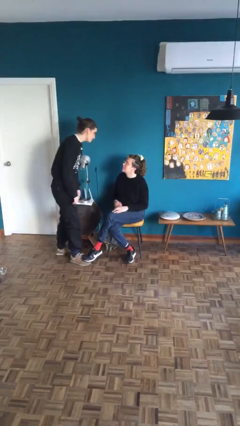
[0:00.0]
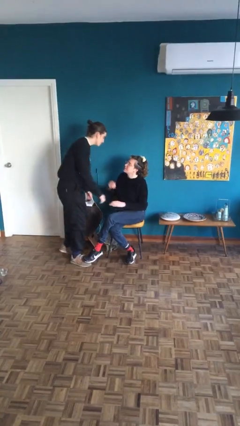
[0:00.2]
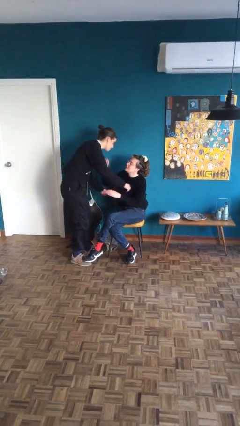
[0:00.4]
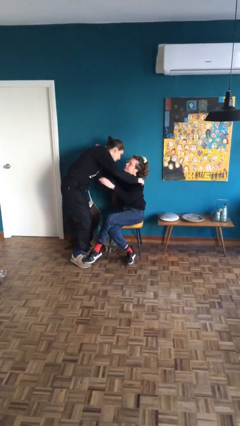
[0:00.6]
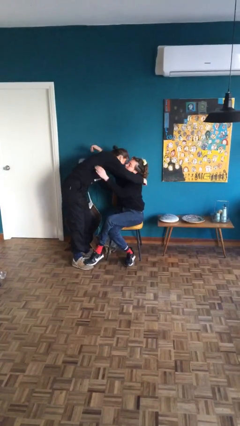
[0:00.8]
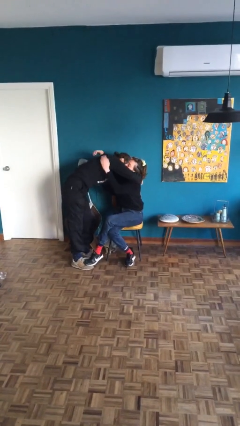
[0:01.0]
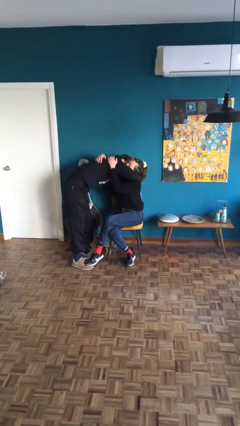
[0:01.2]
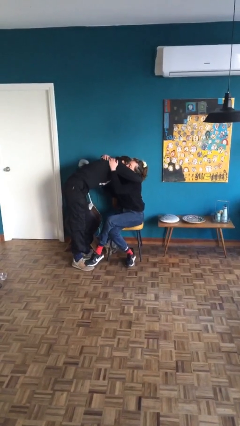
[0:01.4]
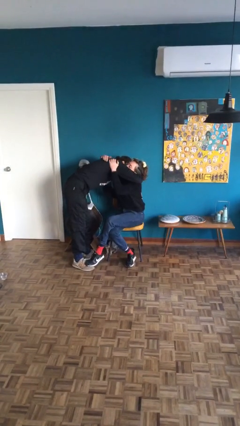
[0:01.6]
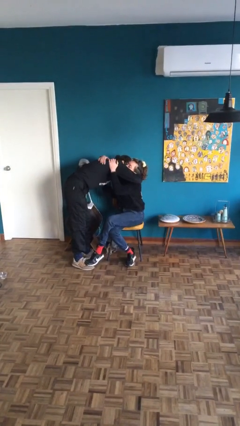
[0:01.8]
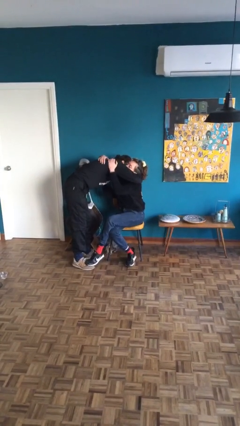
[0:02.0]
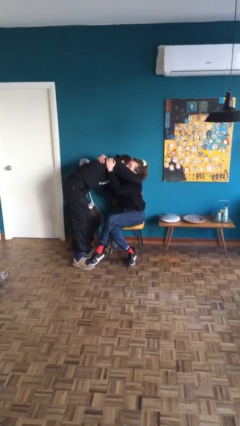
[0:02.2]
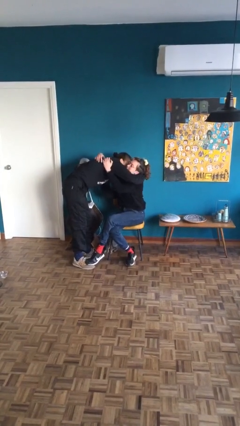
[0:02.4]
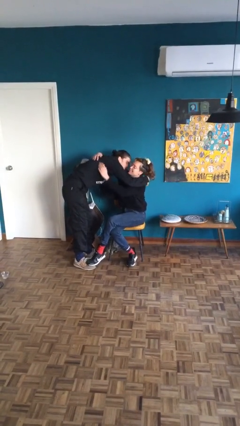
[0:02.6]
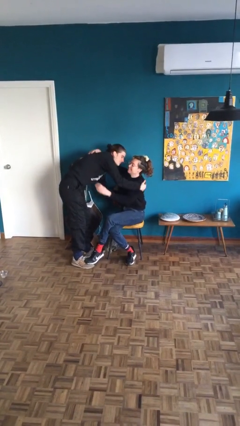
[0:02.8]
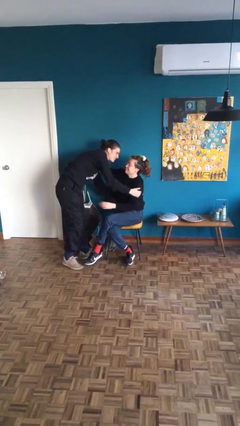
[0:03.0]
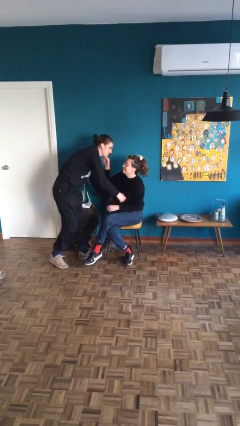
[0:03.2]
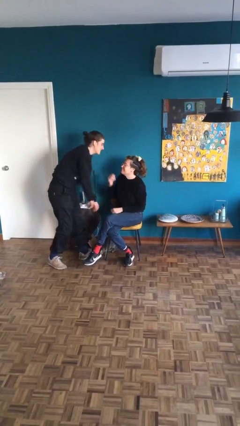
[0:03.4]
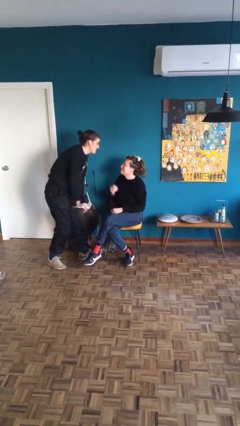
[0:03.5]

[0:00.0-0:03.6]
person embraces person

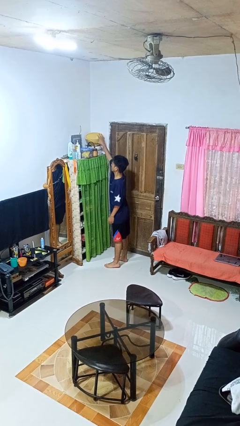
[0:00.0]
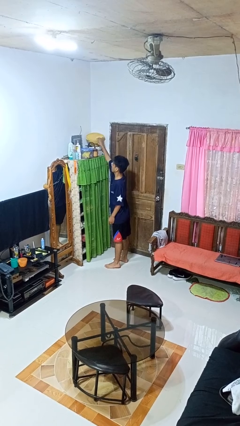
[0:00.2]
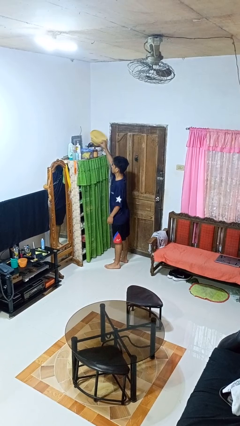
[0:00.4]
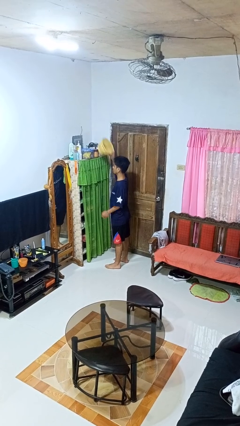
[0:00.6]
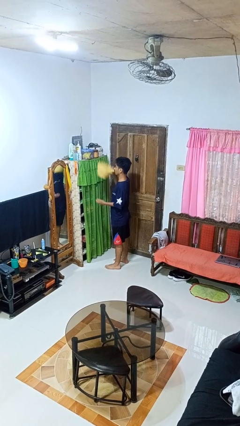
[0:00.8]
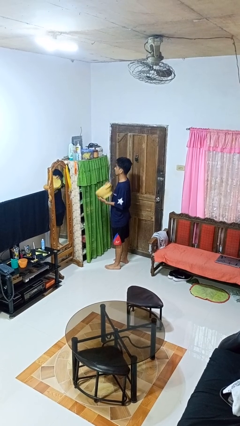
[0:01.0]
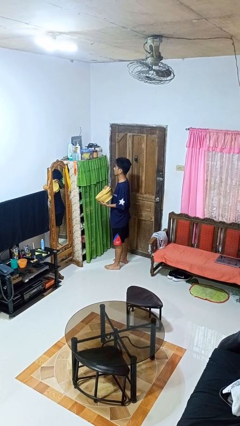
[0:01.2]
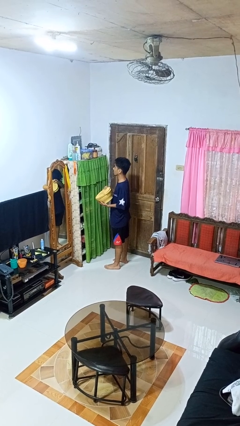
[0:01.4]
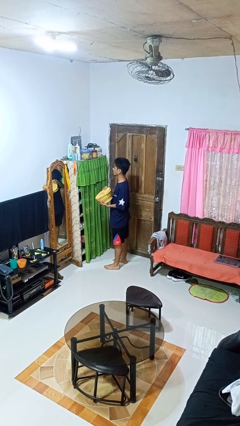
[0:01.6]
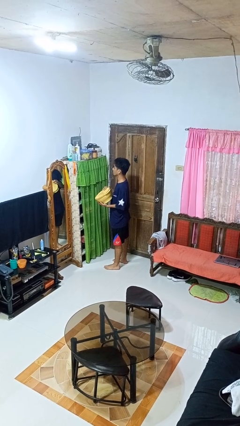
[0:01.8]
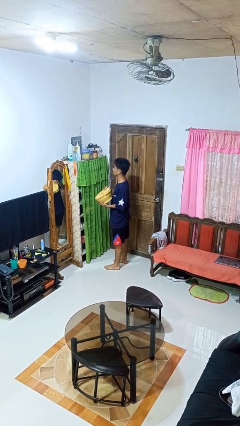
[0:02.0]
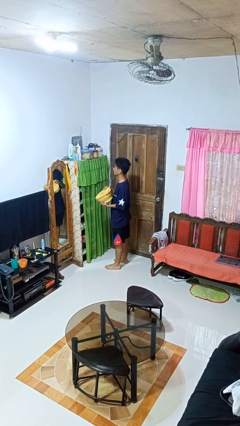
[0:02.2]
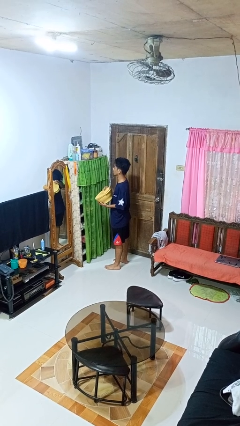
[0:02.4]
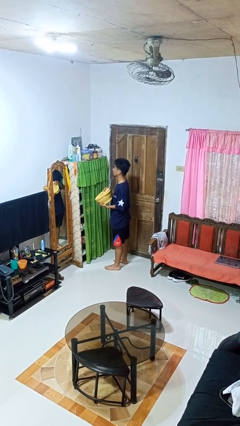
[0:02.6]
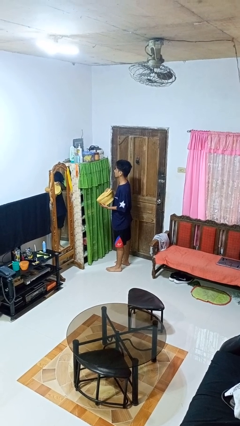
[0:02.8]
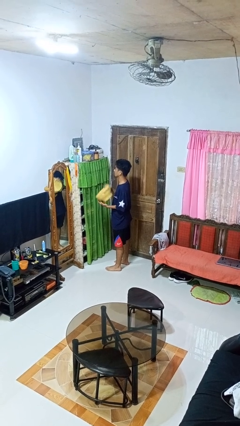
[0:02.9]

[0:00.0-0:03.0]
person picks up object from shelf

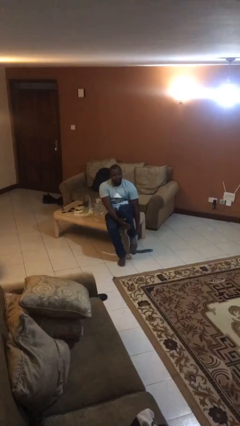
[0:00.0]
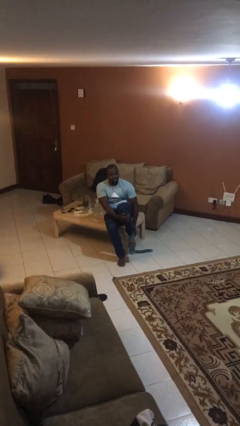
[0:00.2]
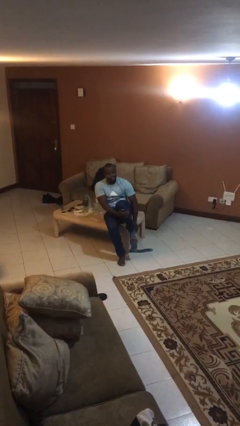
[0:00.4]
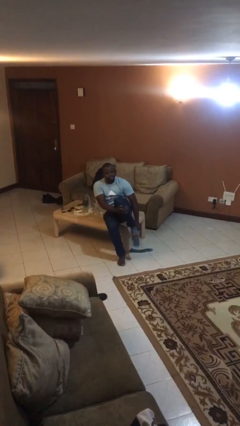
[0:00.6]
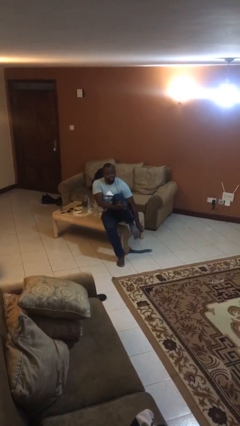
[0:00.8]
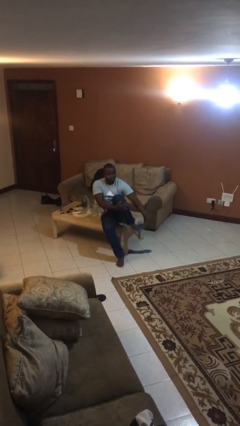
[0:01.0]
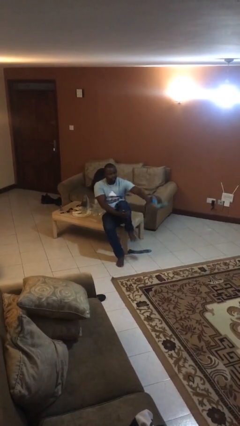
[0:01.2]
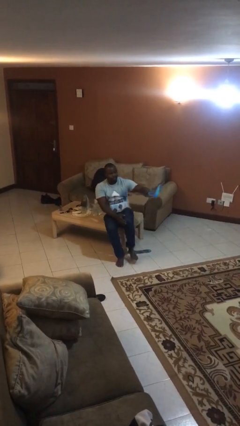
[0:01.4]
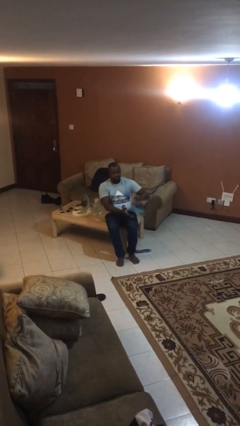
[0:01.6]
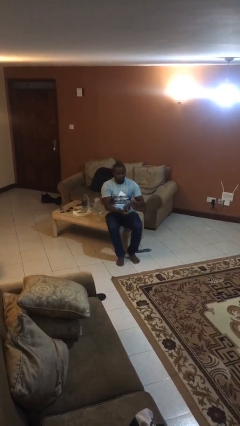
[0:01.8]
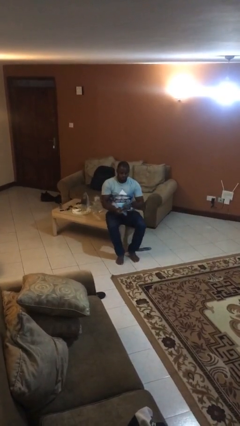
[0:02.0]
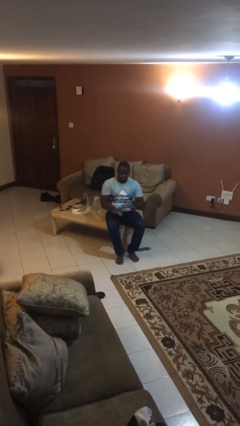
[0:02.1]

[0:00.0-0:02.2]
person takes off socks

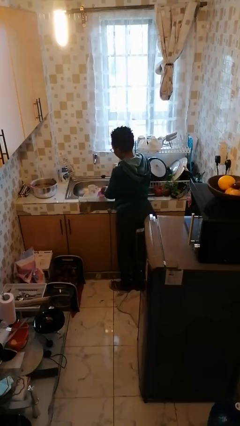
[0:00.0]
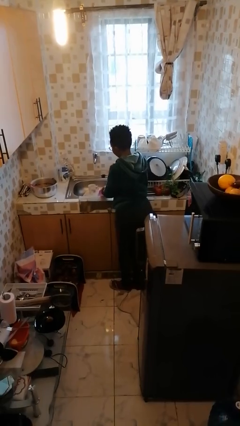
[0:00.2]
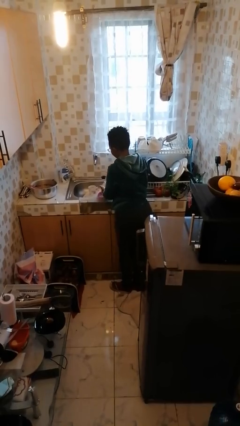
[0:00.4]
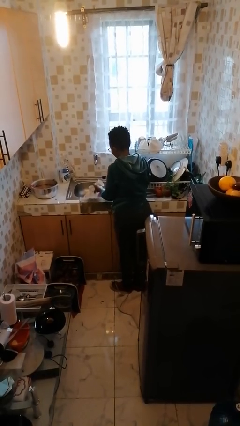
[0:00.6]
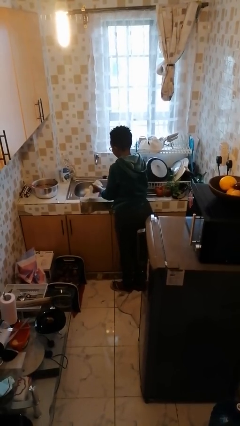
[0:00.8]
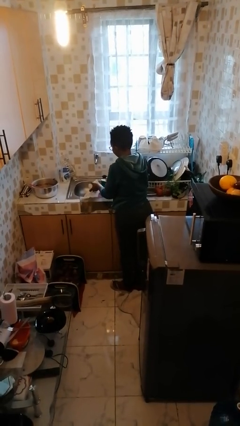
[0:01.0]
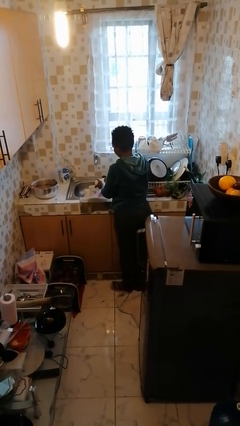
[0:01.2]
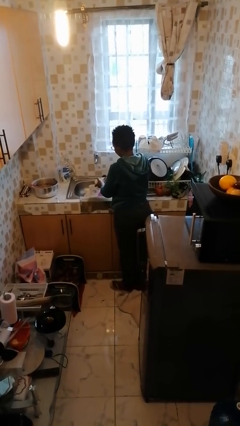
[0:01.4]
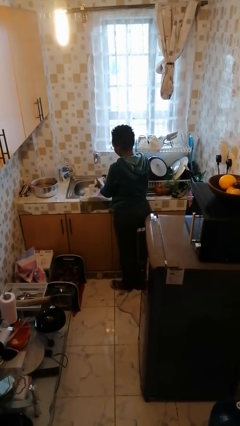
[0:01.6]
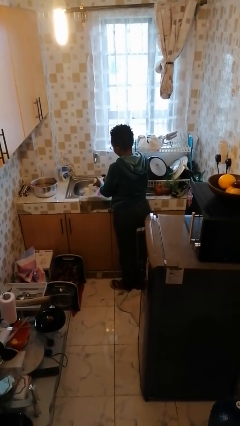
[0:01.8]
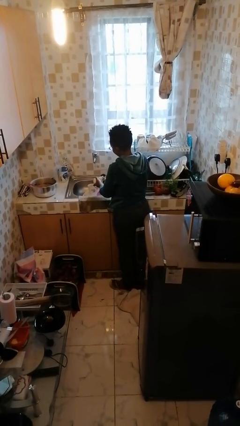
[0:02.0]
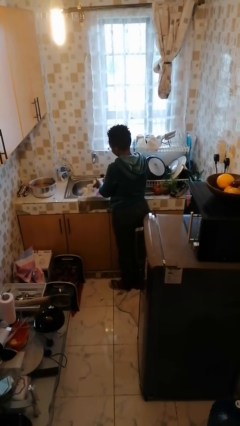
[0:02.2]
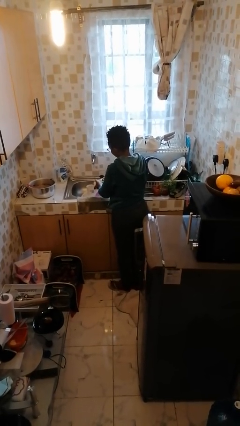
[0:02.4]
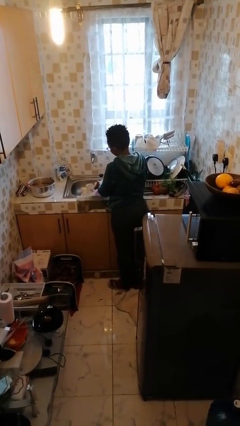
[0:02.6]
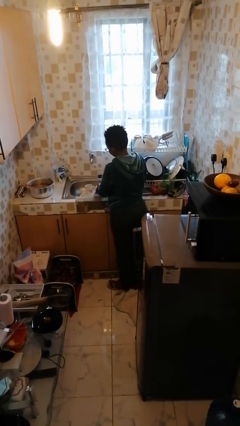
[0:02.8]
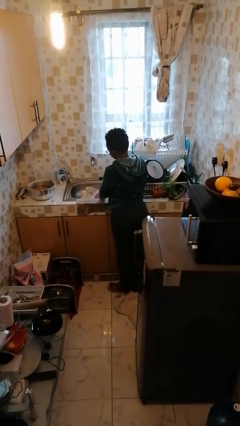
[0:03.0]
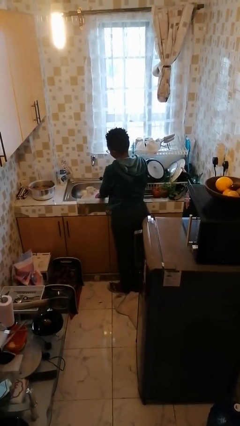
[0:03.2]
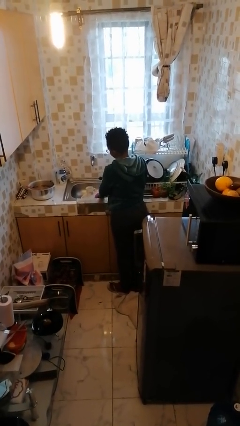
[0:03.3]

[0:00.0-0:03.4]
person washes dish

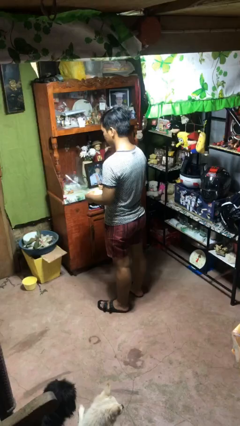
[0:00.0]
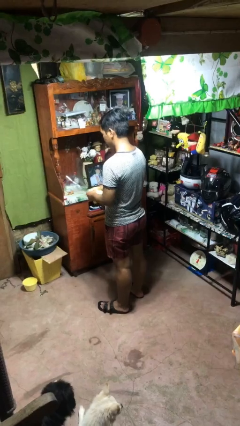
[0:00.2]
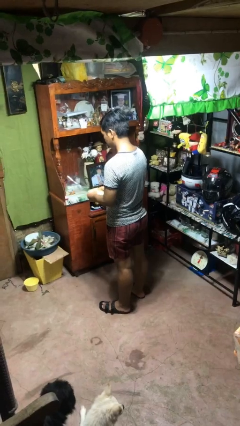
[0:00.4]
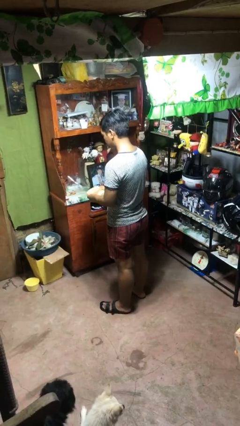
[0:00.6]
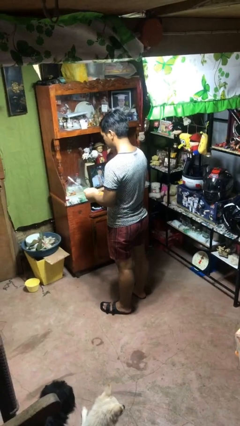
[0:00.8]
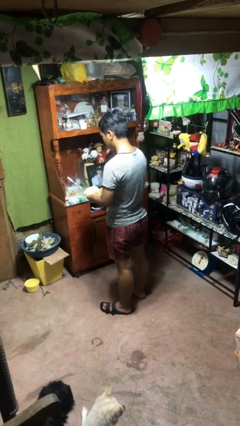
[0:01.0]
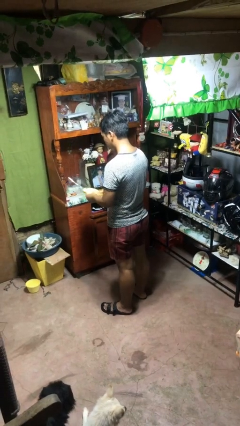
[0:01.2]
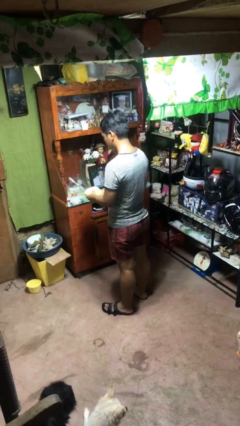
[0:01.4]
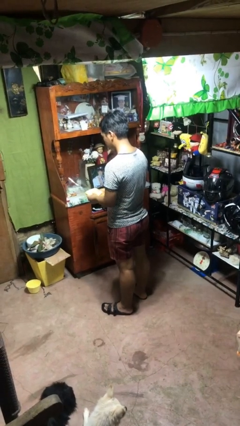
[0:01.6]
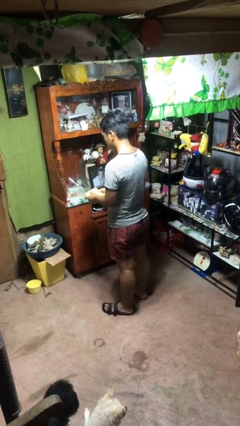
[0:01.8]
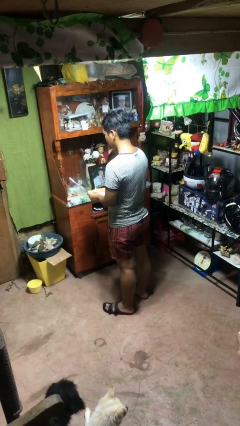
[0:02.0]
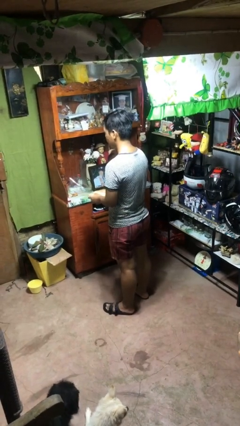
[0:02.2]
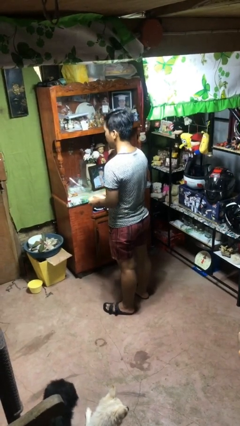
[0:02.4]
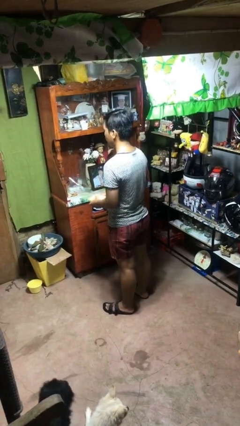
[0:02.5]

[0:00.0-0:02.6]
person squeezes object

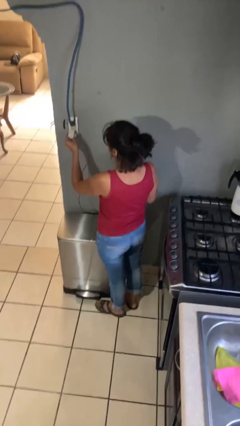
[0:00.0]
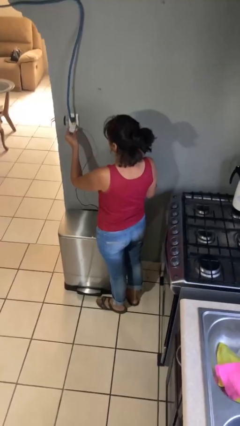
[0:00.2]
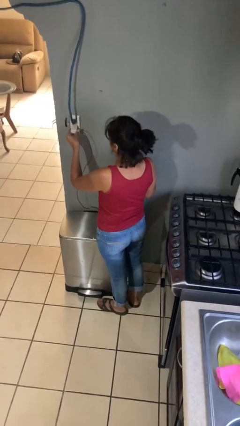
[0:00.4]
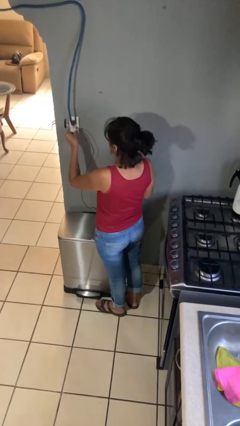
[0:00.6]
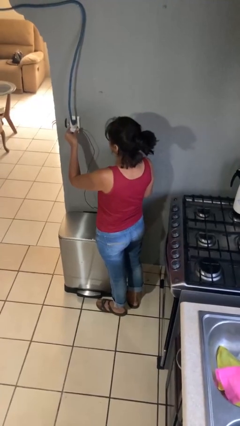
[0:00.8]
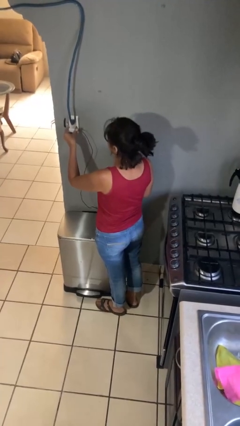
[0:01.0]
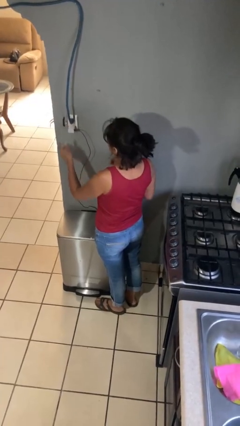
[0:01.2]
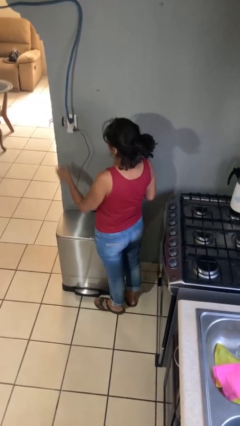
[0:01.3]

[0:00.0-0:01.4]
person plugs into electrical socket

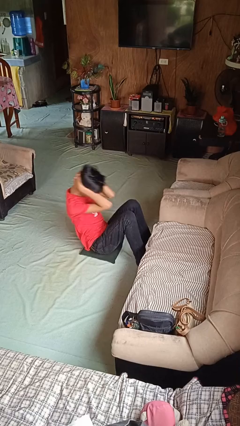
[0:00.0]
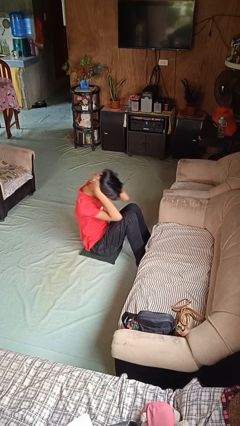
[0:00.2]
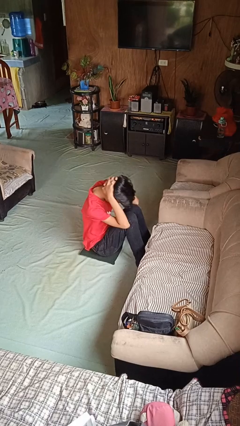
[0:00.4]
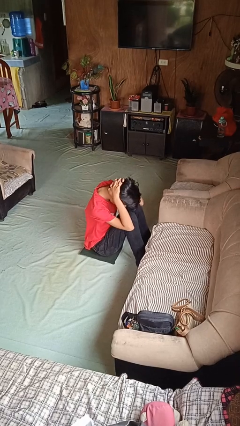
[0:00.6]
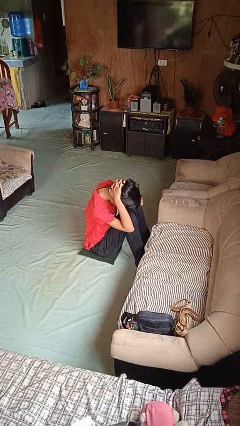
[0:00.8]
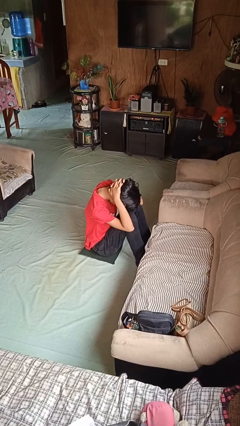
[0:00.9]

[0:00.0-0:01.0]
person exercises with situp
